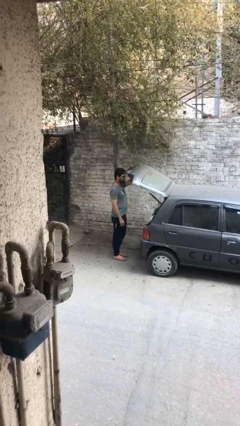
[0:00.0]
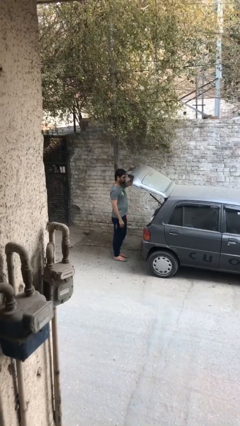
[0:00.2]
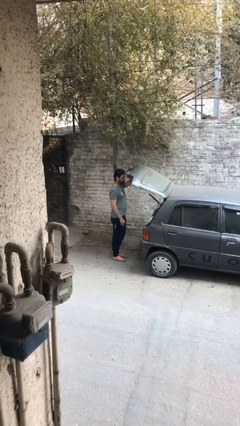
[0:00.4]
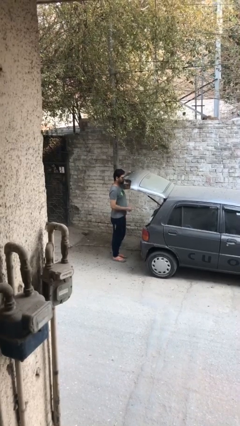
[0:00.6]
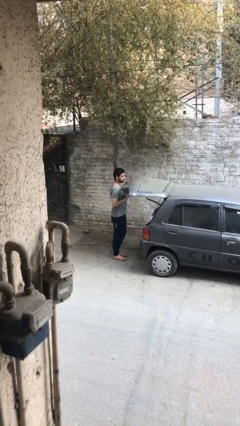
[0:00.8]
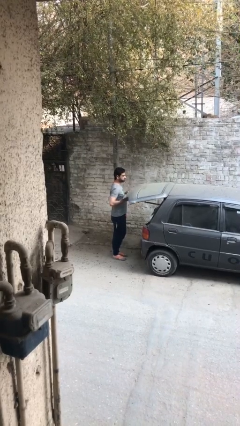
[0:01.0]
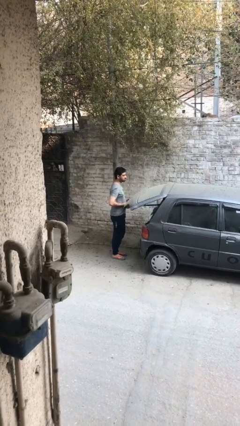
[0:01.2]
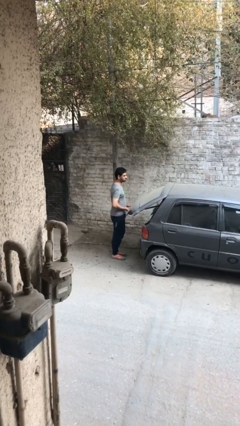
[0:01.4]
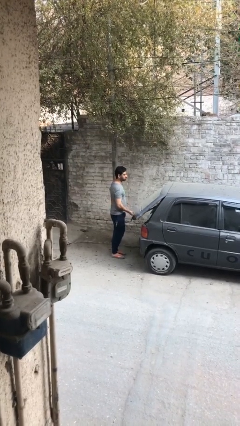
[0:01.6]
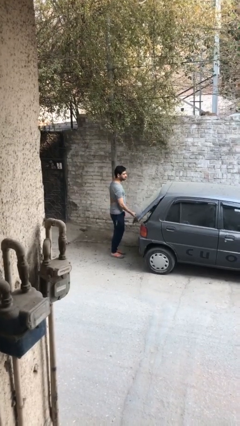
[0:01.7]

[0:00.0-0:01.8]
person closes car trunk

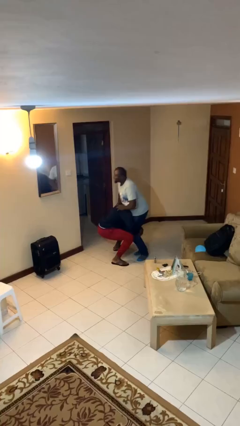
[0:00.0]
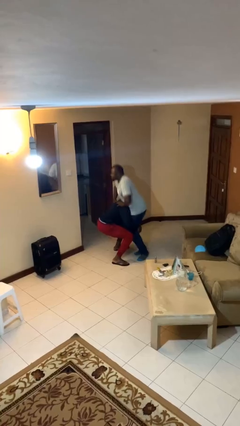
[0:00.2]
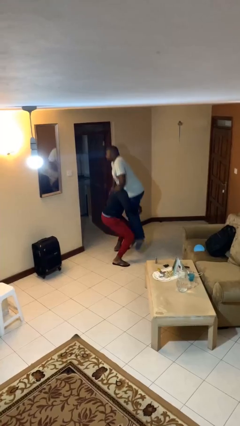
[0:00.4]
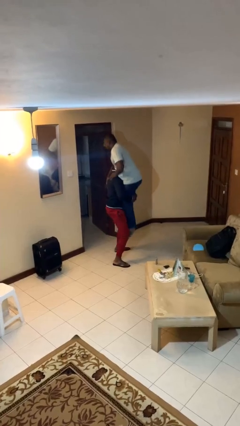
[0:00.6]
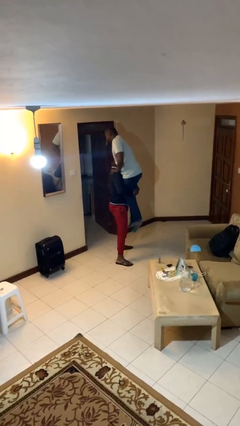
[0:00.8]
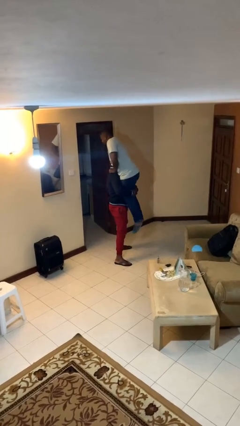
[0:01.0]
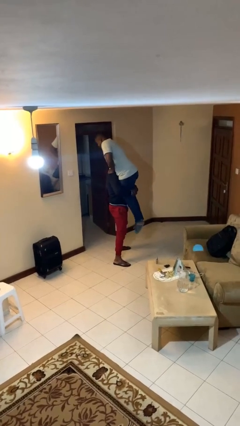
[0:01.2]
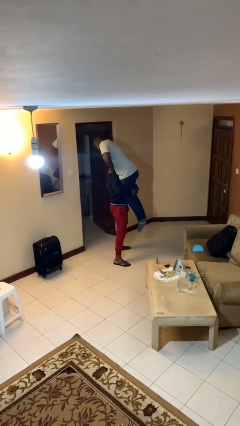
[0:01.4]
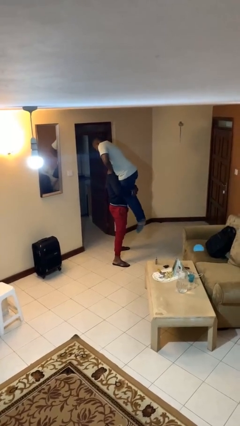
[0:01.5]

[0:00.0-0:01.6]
person picks up person

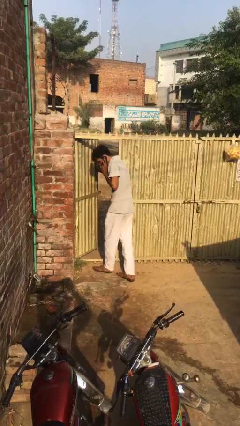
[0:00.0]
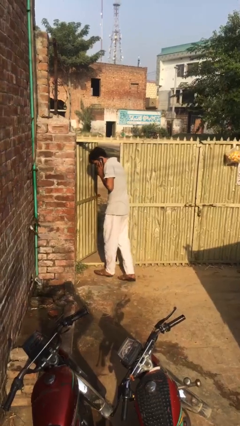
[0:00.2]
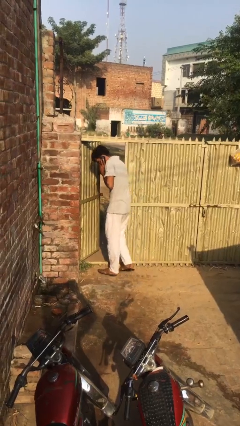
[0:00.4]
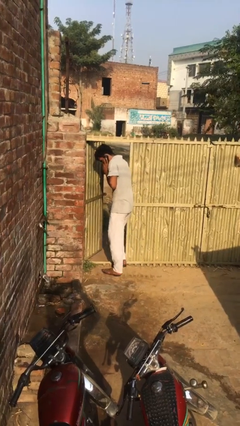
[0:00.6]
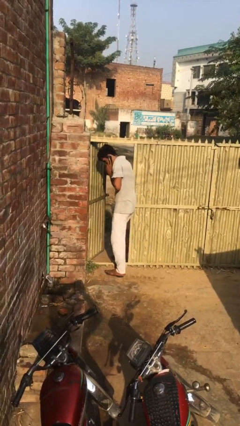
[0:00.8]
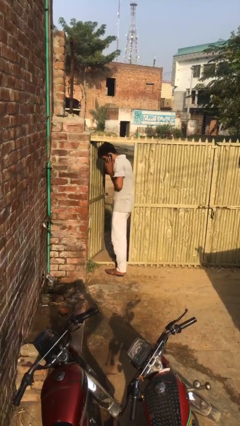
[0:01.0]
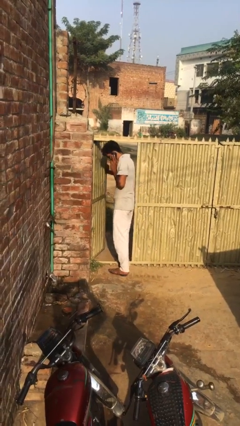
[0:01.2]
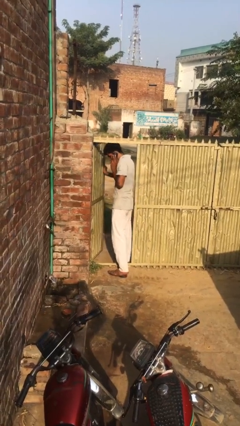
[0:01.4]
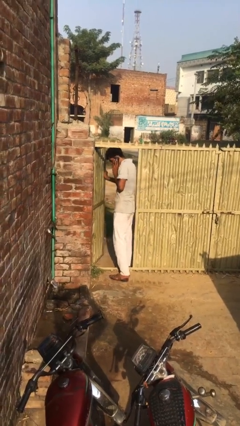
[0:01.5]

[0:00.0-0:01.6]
person exits scene through structure

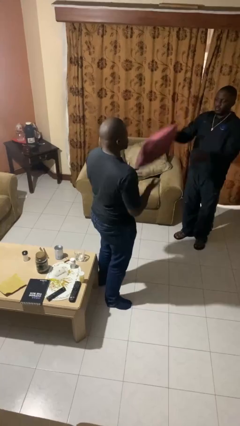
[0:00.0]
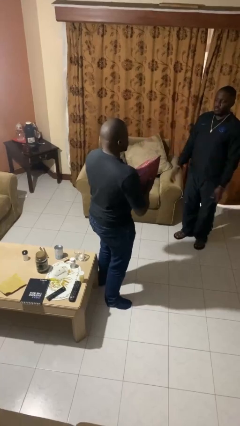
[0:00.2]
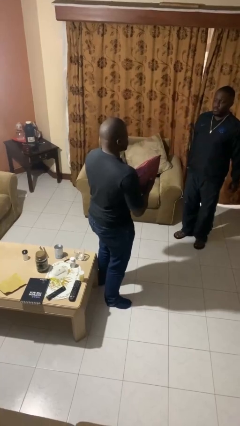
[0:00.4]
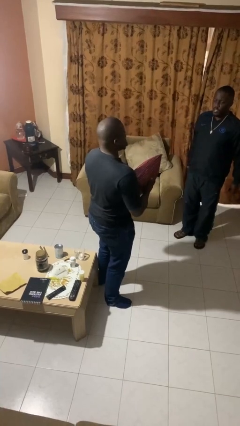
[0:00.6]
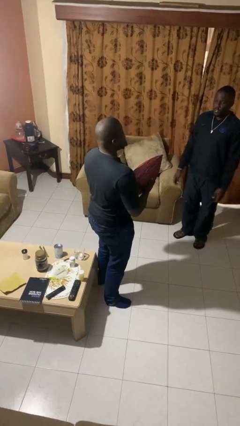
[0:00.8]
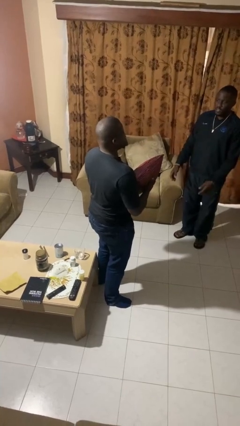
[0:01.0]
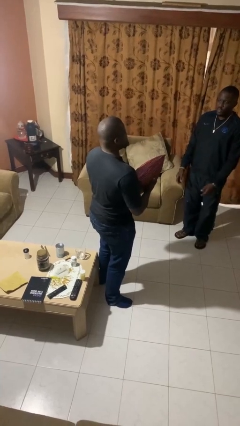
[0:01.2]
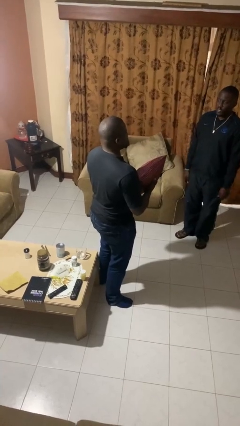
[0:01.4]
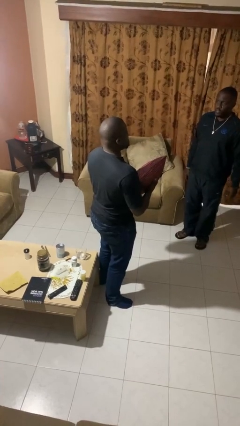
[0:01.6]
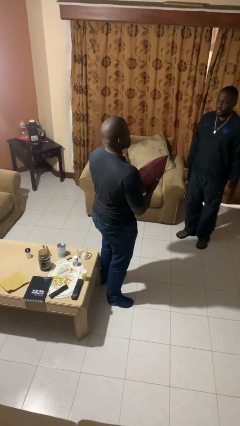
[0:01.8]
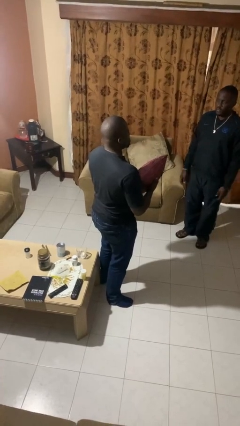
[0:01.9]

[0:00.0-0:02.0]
person catches object from person

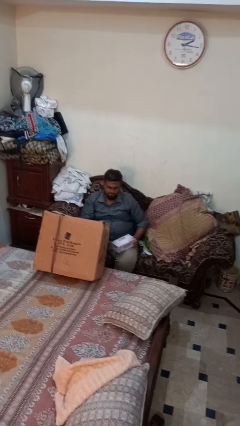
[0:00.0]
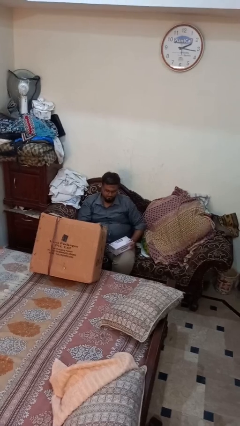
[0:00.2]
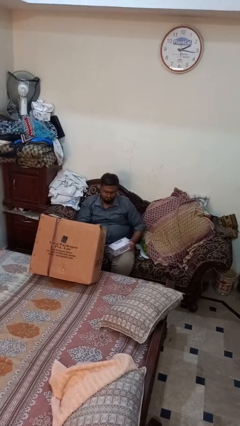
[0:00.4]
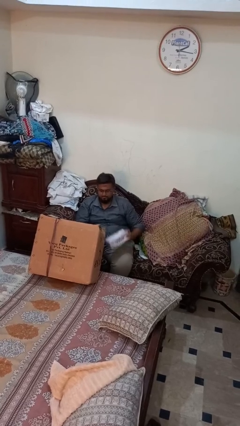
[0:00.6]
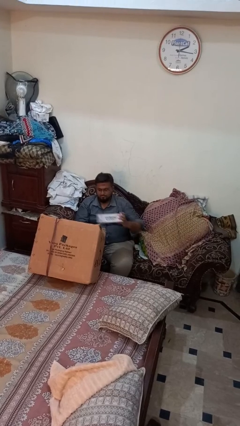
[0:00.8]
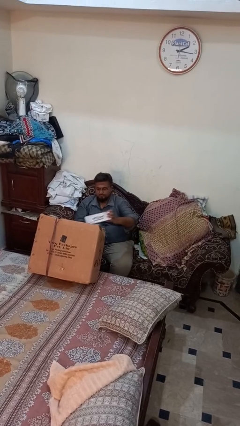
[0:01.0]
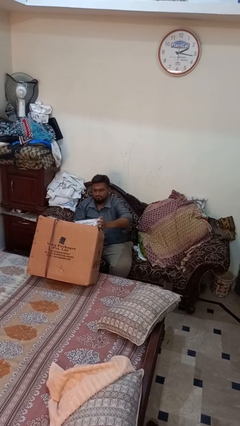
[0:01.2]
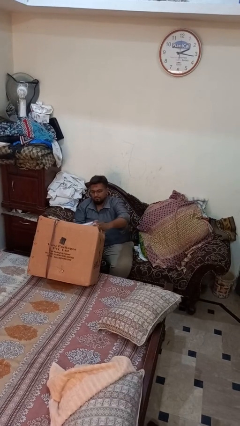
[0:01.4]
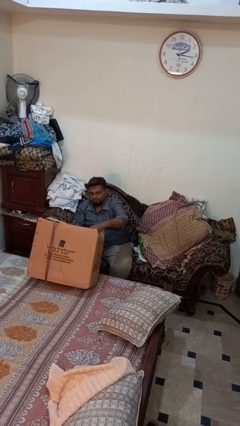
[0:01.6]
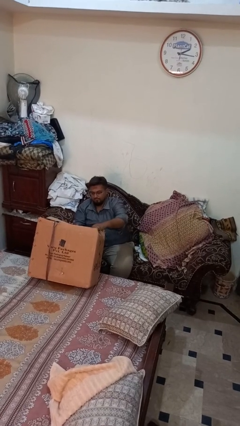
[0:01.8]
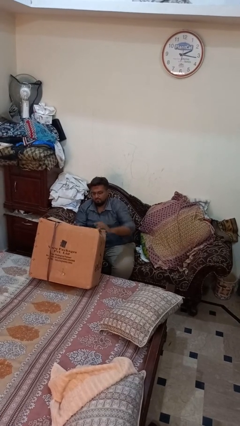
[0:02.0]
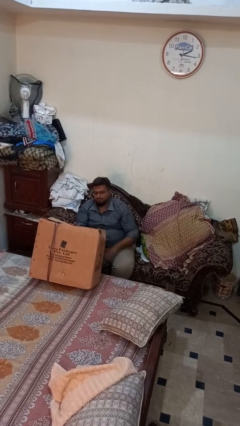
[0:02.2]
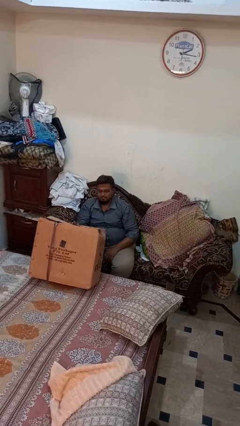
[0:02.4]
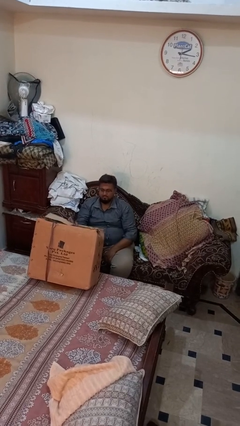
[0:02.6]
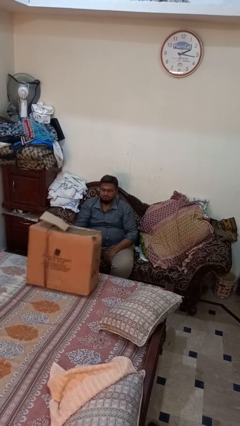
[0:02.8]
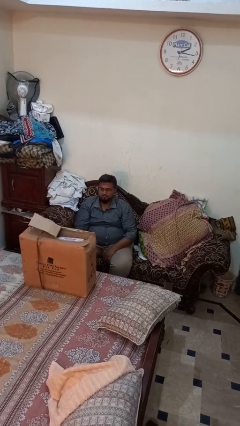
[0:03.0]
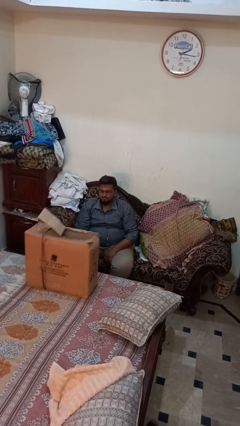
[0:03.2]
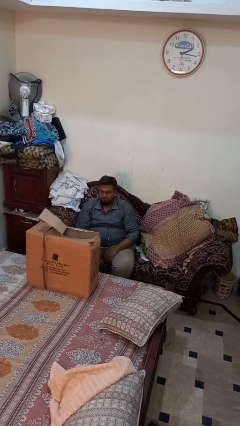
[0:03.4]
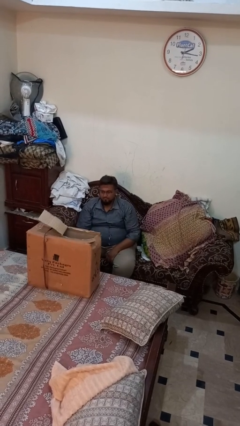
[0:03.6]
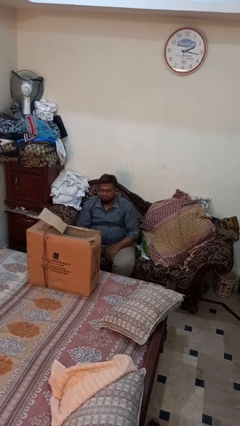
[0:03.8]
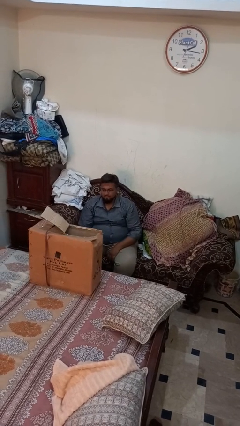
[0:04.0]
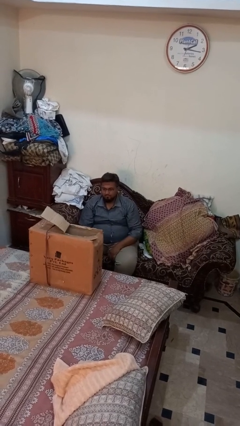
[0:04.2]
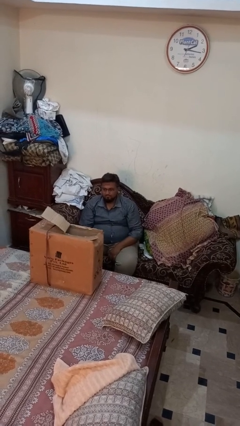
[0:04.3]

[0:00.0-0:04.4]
person puts object into box

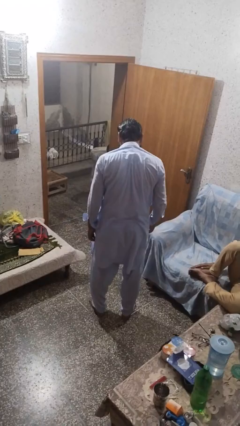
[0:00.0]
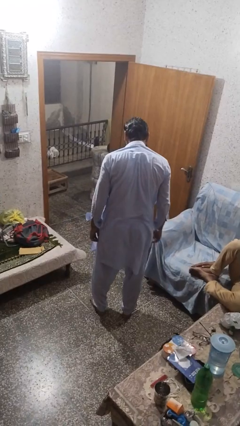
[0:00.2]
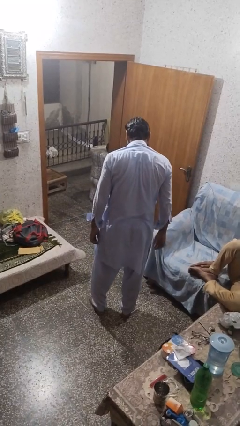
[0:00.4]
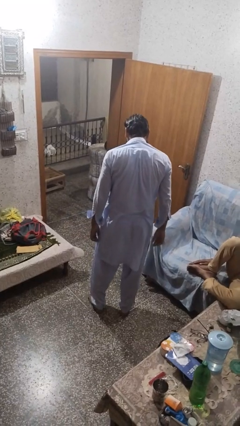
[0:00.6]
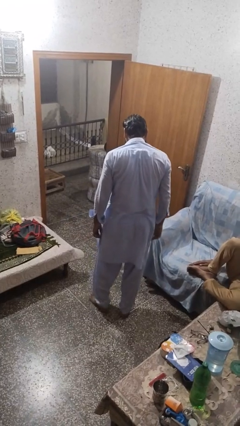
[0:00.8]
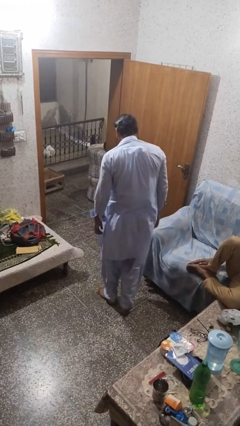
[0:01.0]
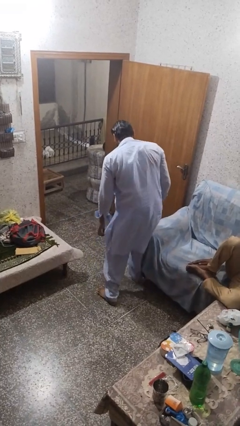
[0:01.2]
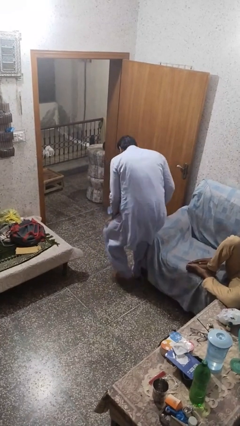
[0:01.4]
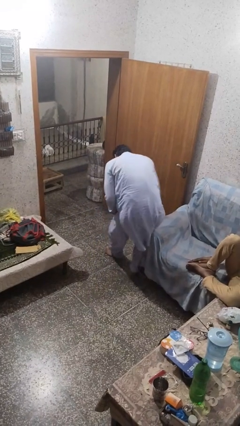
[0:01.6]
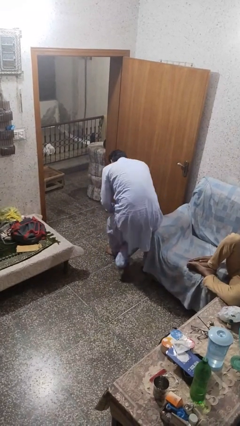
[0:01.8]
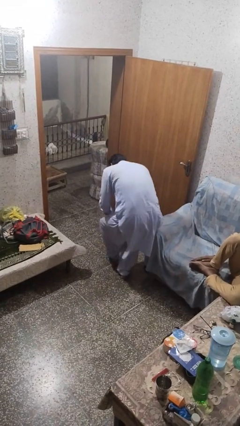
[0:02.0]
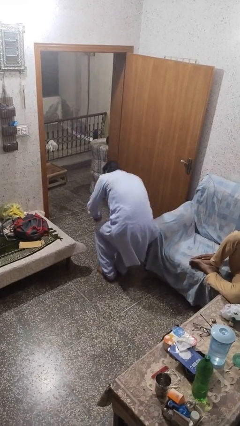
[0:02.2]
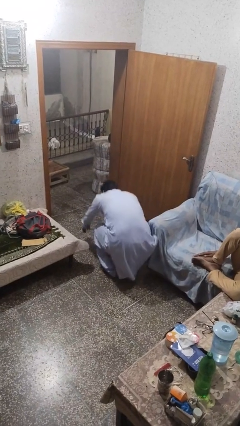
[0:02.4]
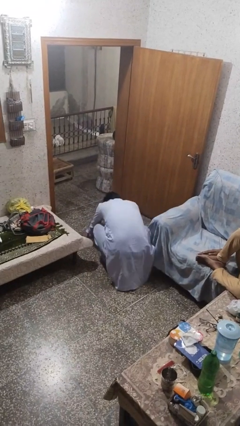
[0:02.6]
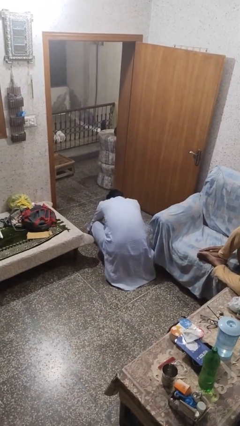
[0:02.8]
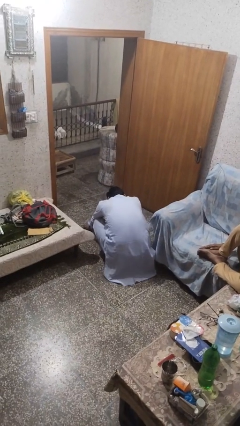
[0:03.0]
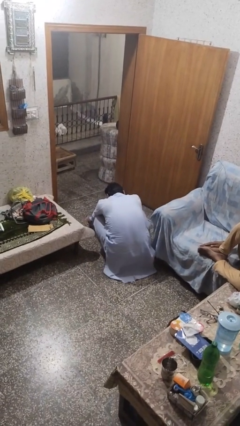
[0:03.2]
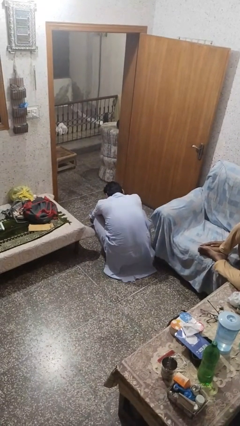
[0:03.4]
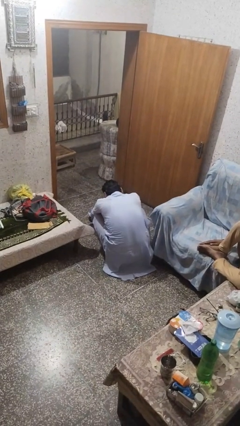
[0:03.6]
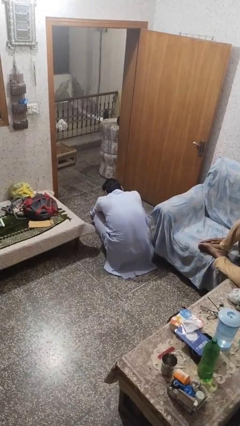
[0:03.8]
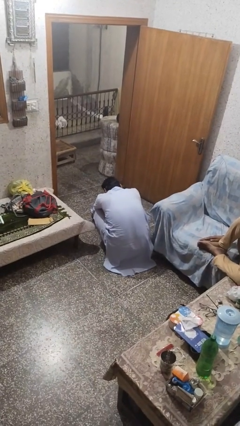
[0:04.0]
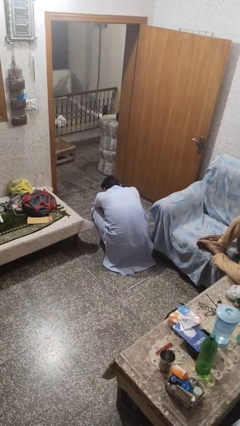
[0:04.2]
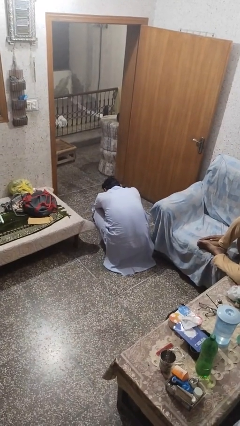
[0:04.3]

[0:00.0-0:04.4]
person trips on object on floor

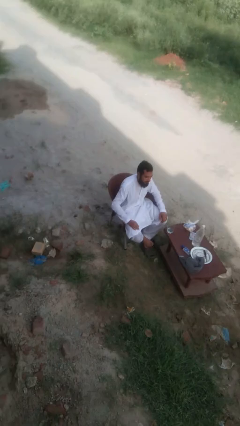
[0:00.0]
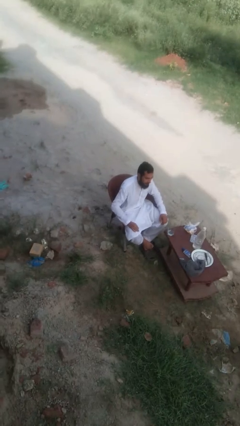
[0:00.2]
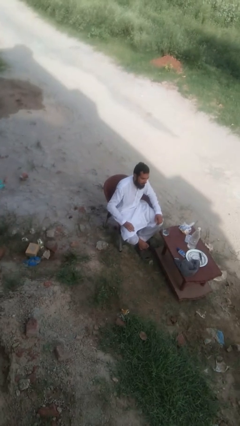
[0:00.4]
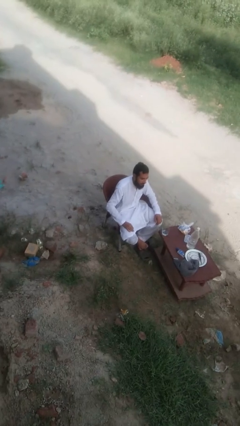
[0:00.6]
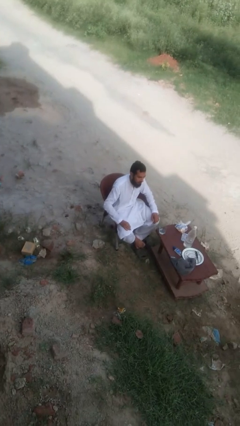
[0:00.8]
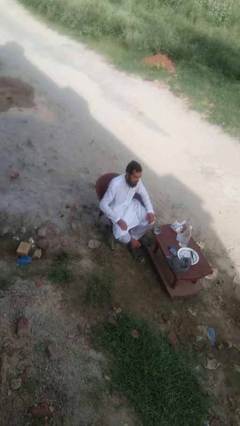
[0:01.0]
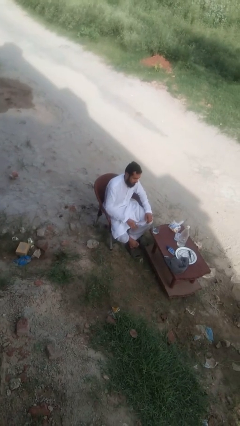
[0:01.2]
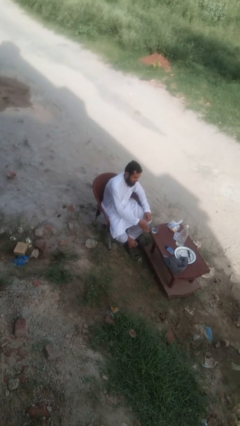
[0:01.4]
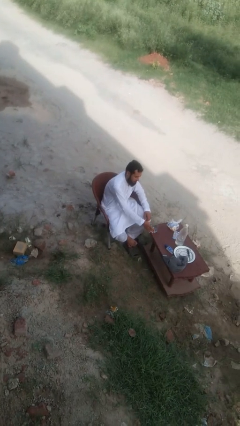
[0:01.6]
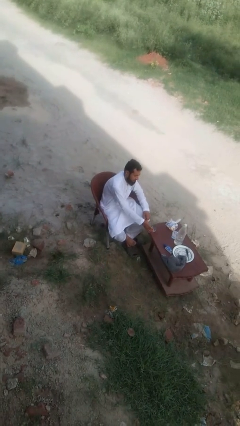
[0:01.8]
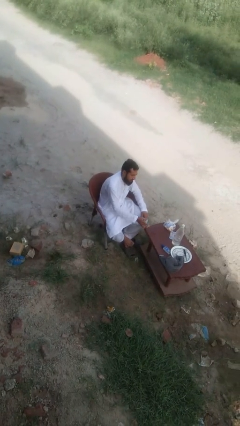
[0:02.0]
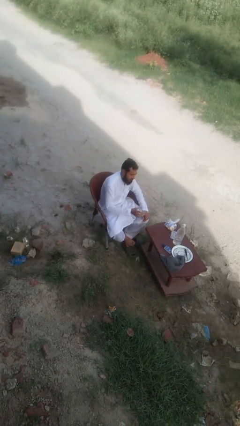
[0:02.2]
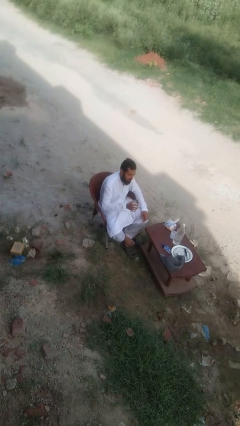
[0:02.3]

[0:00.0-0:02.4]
person picks up object from table
